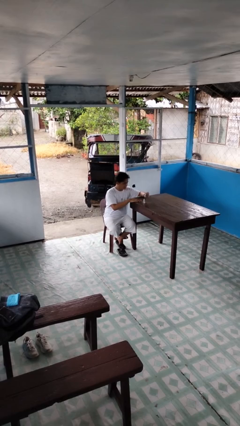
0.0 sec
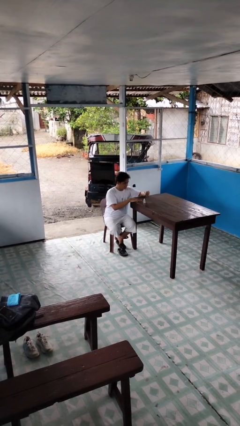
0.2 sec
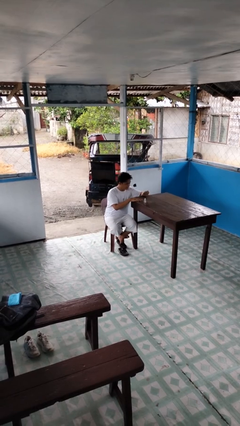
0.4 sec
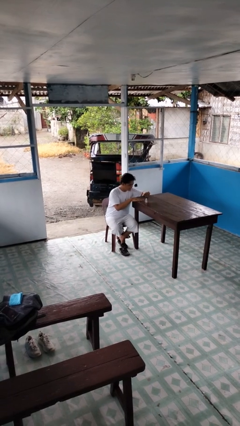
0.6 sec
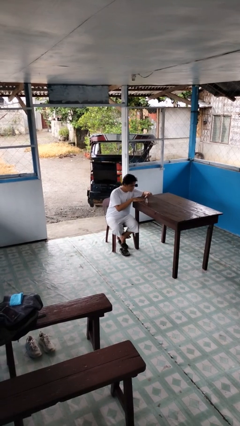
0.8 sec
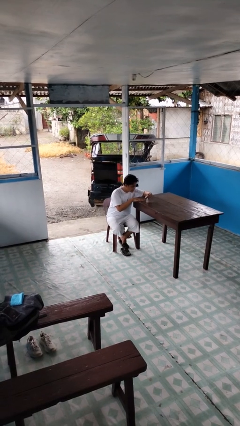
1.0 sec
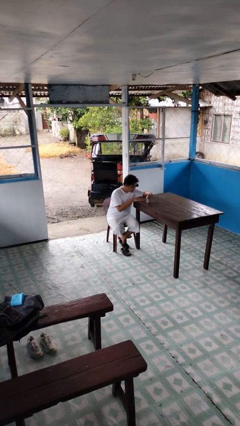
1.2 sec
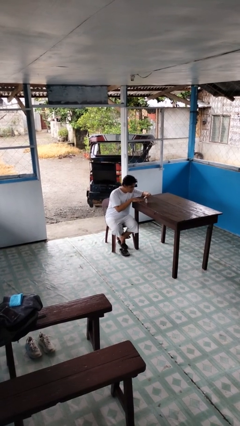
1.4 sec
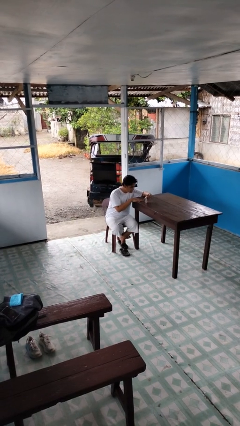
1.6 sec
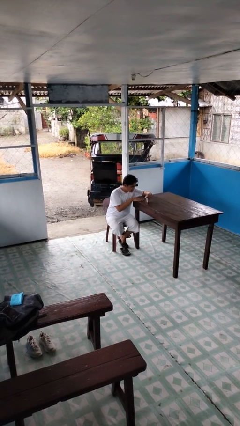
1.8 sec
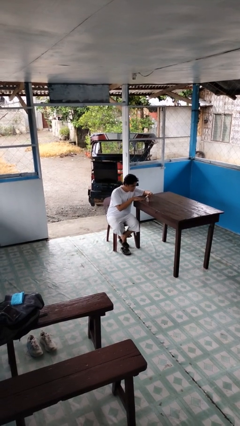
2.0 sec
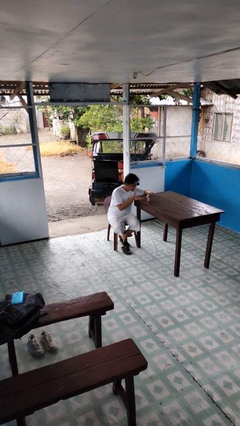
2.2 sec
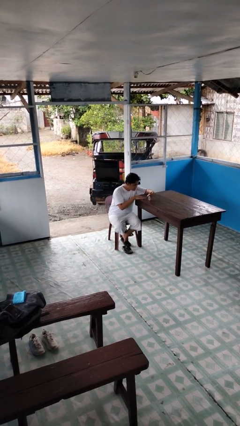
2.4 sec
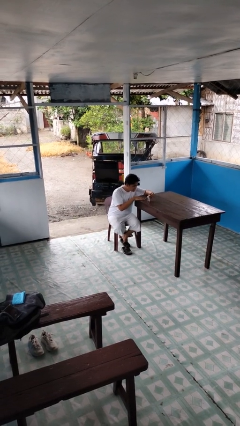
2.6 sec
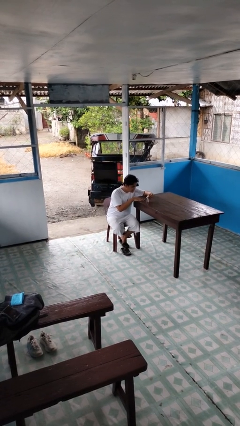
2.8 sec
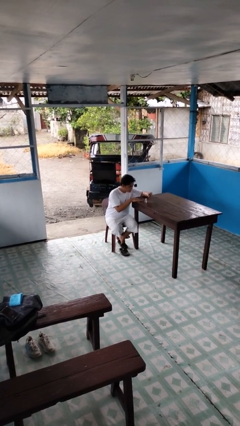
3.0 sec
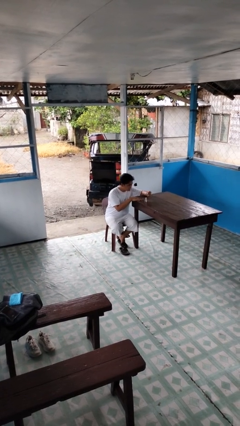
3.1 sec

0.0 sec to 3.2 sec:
person paints fingernails

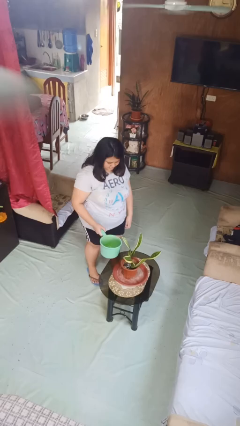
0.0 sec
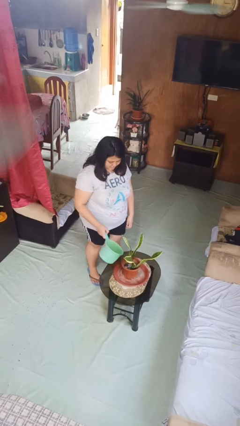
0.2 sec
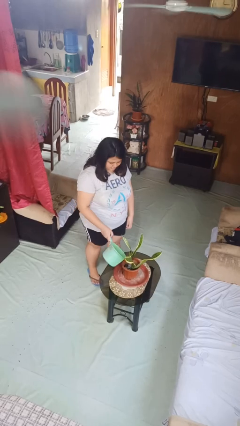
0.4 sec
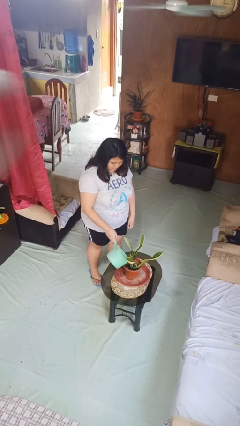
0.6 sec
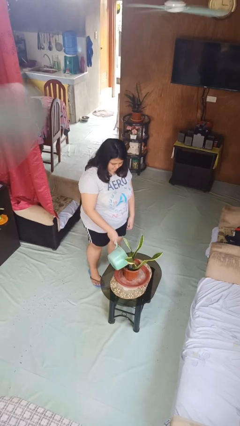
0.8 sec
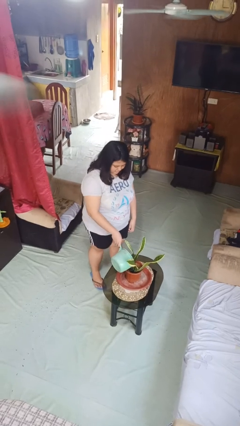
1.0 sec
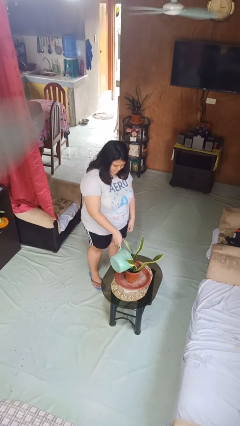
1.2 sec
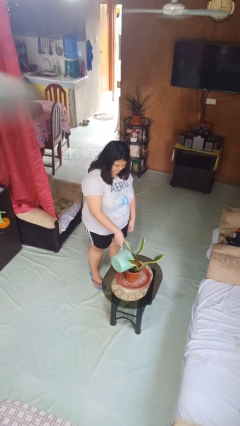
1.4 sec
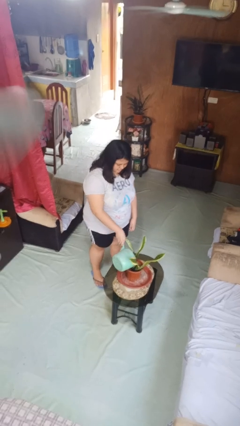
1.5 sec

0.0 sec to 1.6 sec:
person waters houseplant

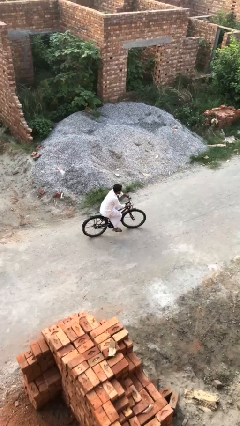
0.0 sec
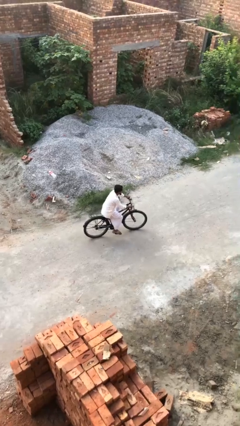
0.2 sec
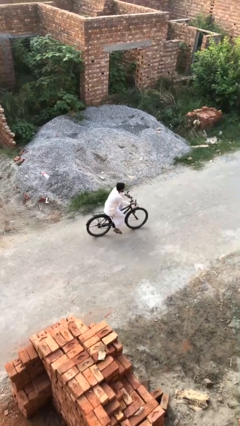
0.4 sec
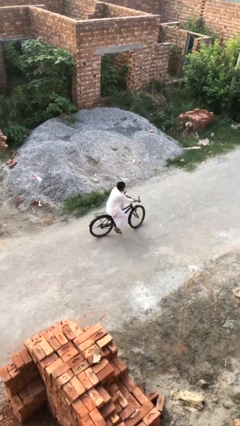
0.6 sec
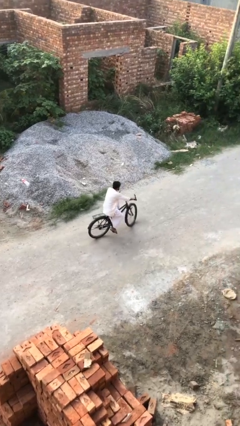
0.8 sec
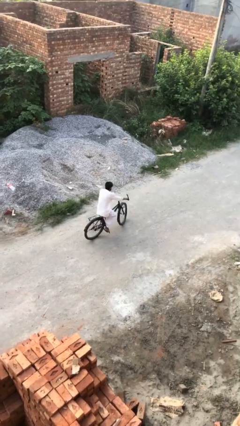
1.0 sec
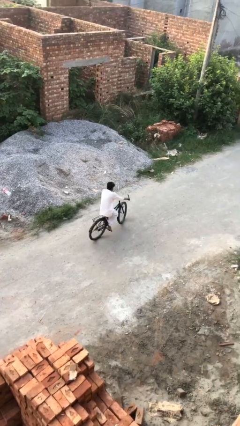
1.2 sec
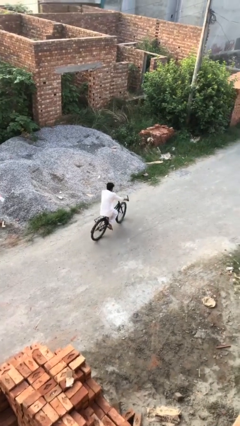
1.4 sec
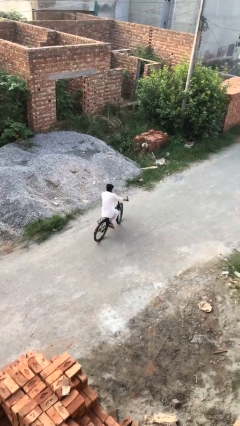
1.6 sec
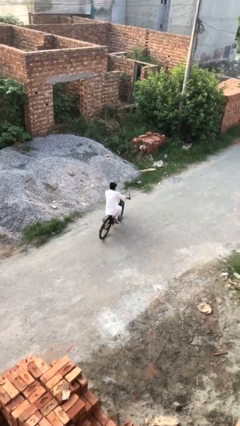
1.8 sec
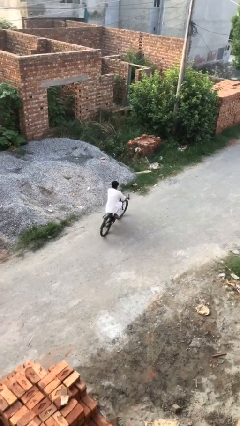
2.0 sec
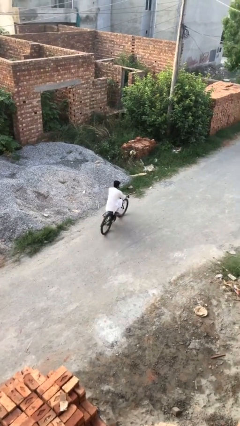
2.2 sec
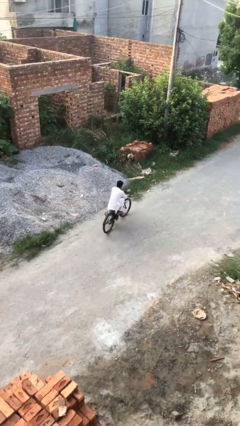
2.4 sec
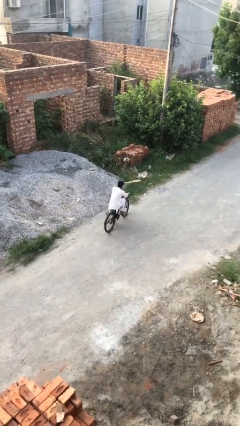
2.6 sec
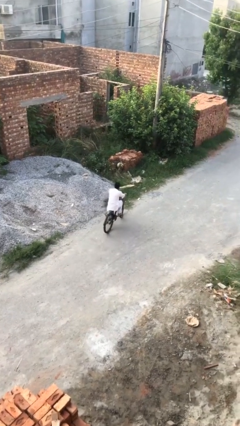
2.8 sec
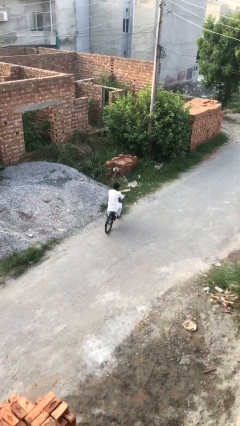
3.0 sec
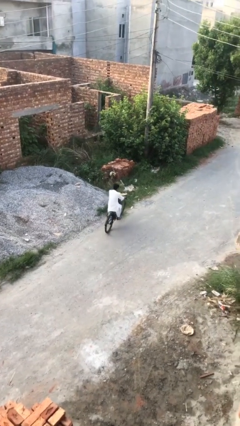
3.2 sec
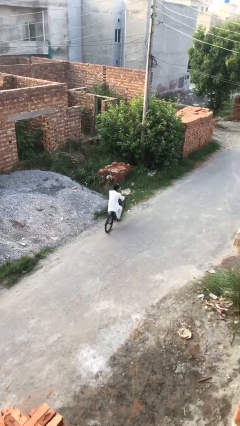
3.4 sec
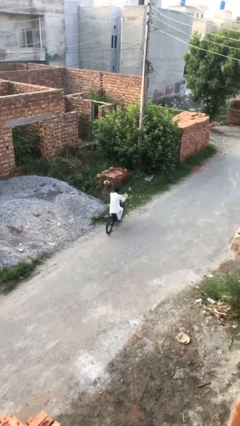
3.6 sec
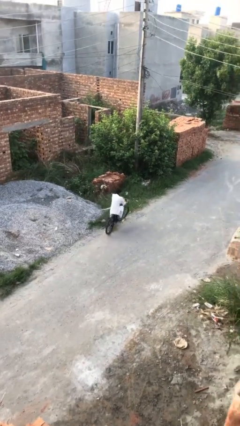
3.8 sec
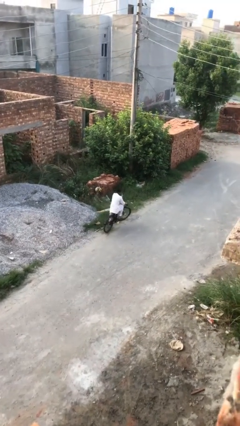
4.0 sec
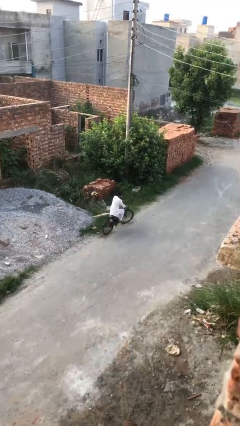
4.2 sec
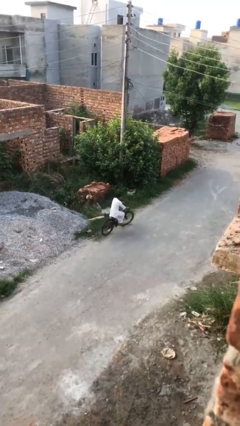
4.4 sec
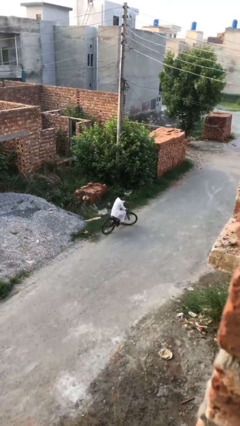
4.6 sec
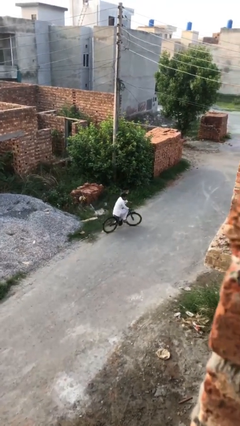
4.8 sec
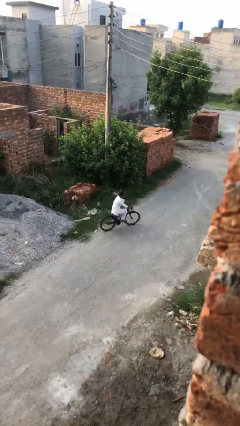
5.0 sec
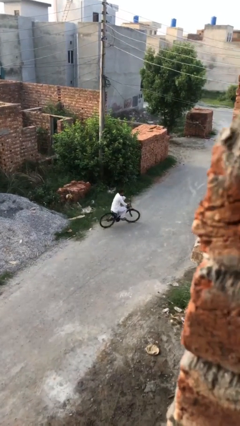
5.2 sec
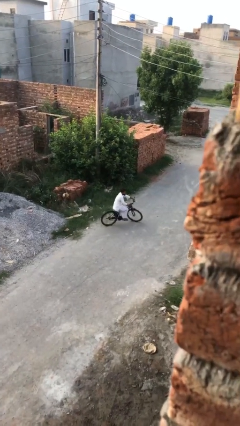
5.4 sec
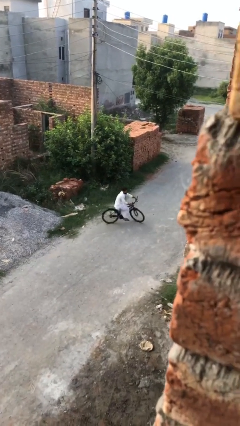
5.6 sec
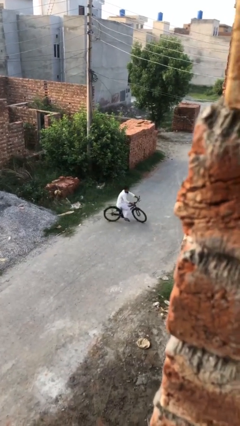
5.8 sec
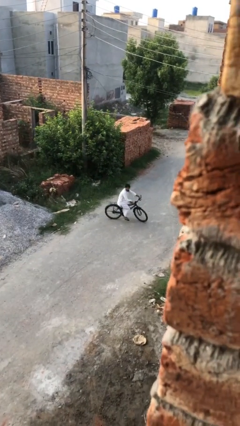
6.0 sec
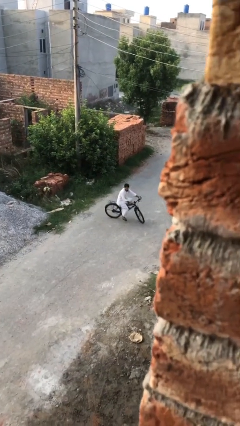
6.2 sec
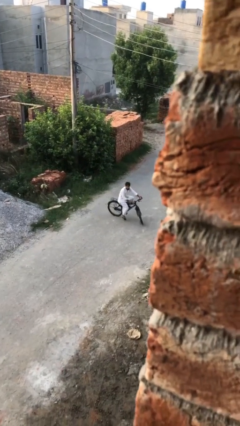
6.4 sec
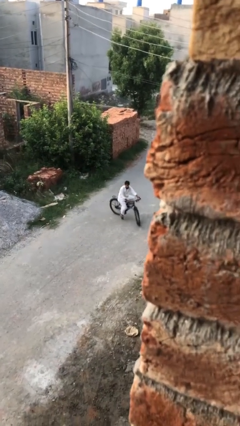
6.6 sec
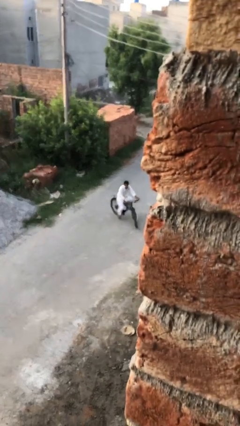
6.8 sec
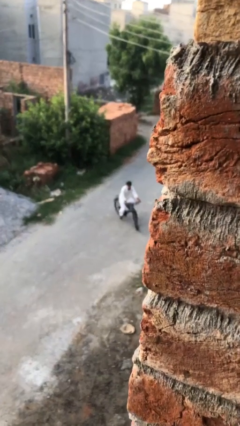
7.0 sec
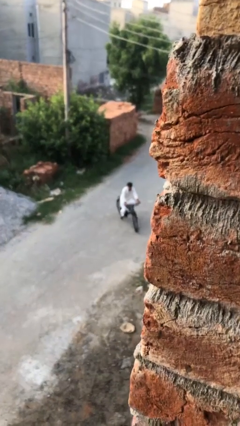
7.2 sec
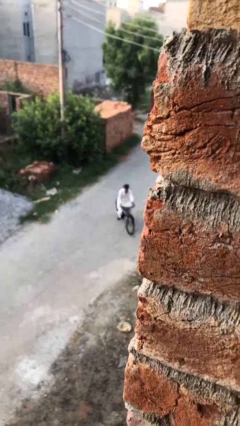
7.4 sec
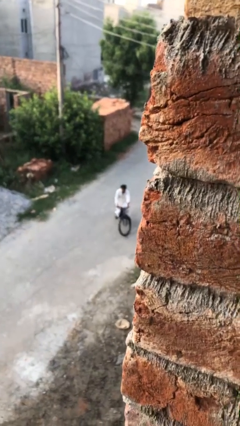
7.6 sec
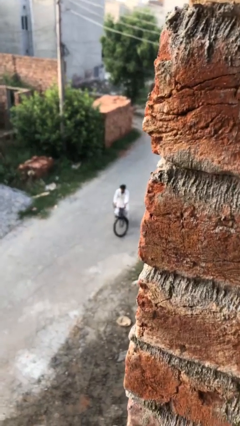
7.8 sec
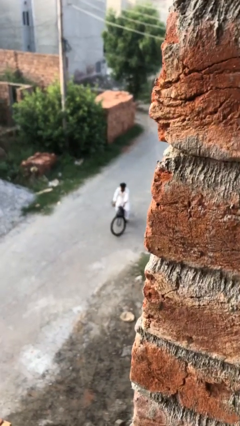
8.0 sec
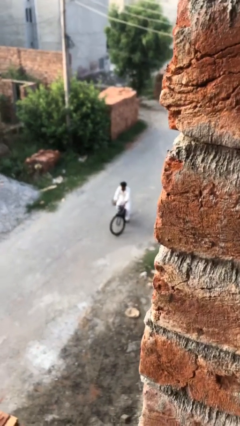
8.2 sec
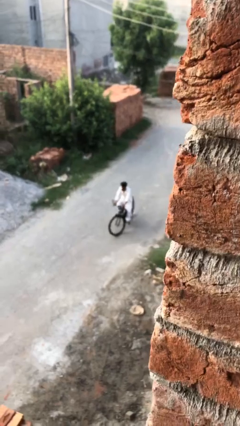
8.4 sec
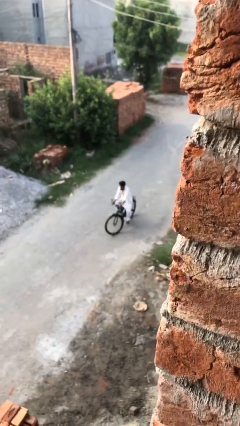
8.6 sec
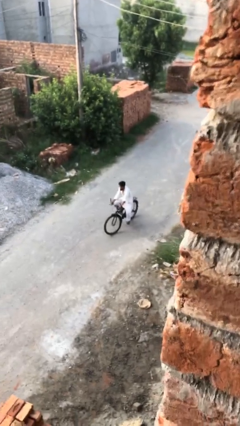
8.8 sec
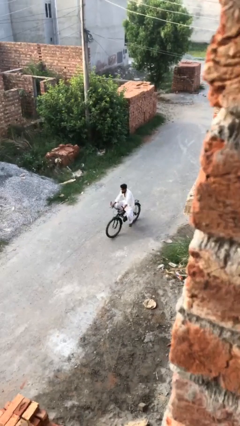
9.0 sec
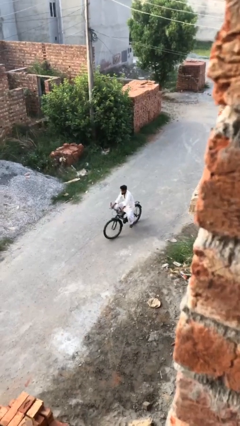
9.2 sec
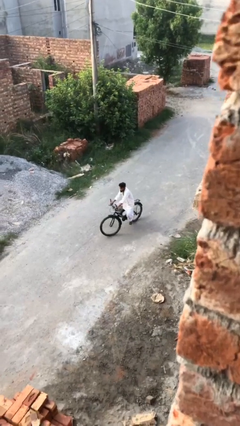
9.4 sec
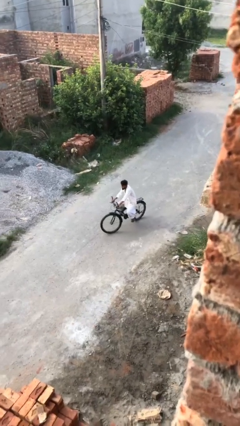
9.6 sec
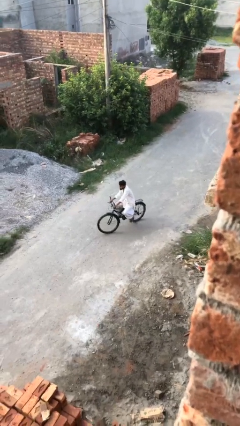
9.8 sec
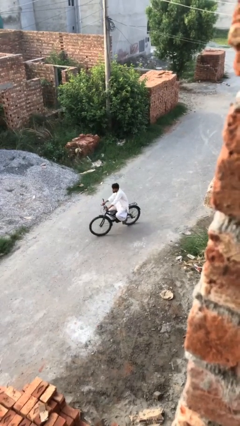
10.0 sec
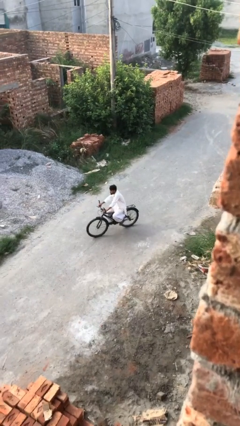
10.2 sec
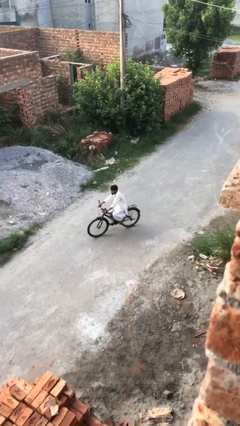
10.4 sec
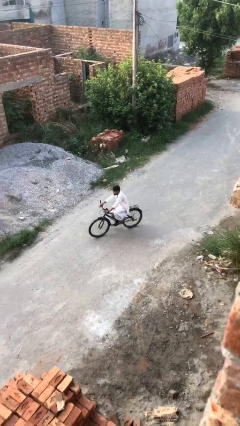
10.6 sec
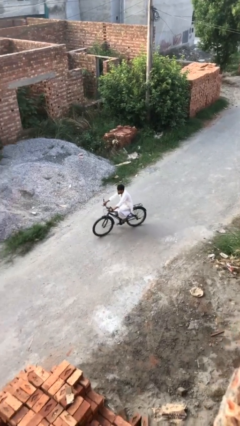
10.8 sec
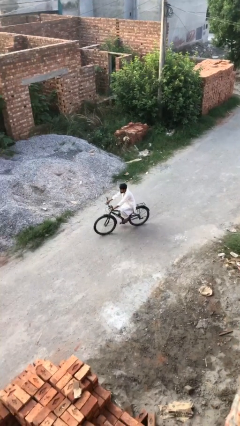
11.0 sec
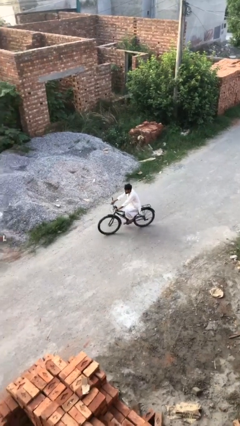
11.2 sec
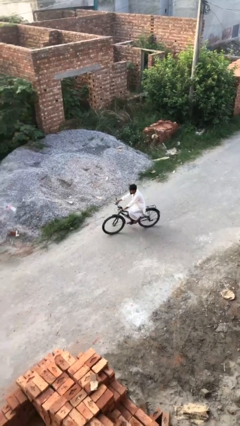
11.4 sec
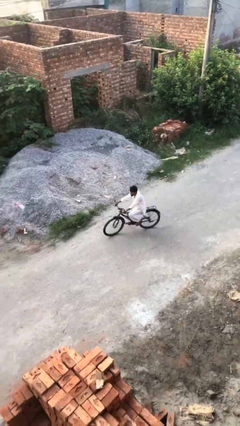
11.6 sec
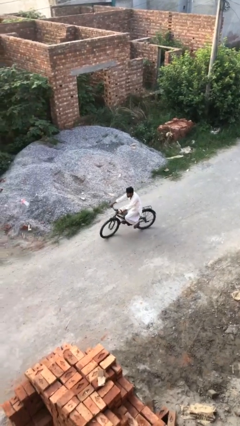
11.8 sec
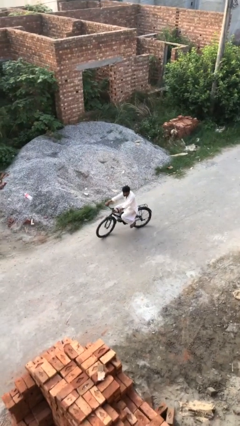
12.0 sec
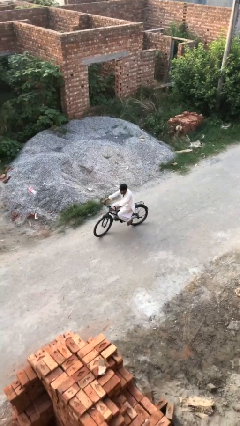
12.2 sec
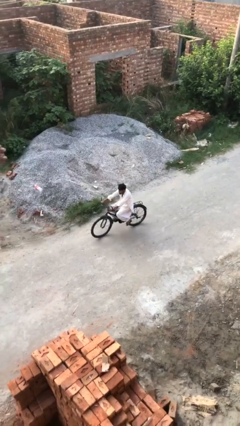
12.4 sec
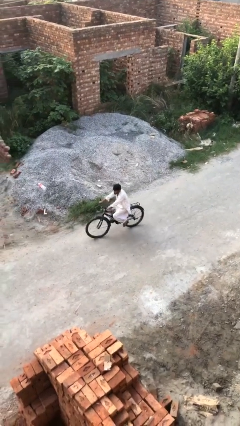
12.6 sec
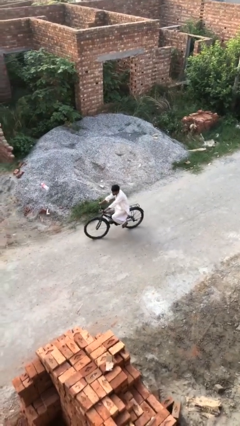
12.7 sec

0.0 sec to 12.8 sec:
person rides bicycle
